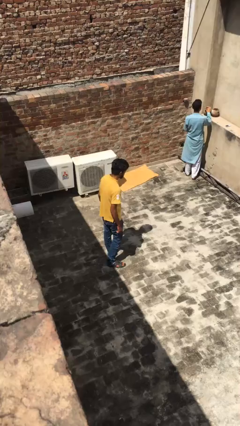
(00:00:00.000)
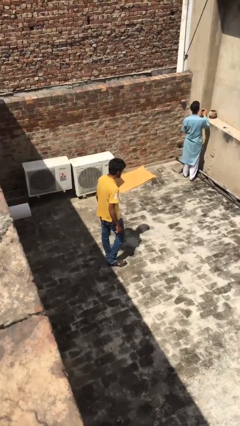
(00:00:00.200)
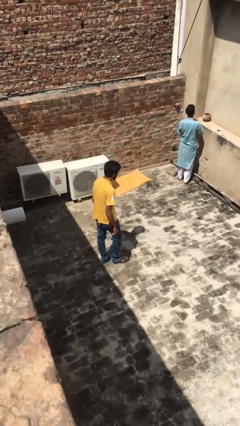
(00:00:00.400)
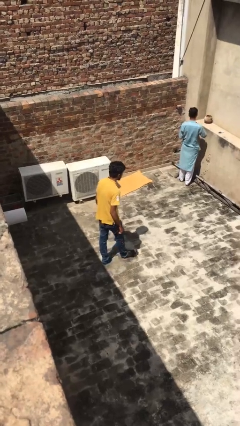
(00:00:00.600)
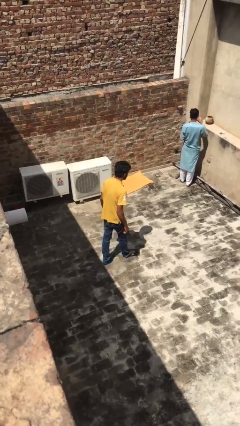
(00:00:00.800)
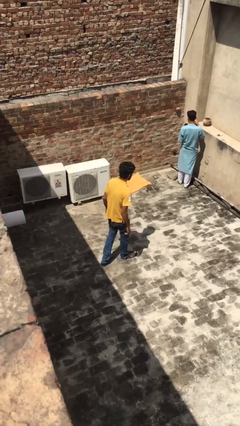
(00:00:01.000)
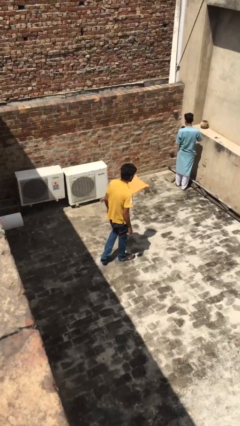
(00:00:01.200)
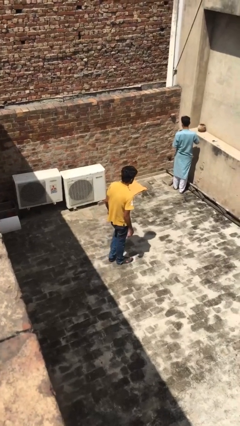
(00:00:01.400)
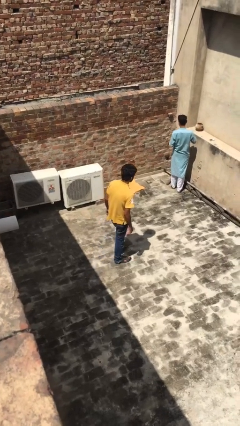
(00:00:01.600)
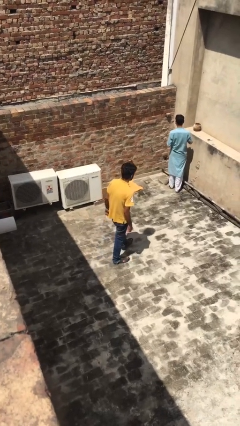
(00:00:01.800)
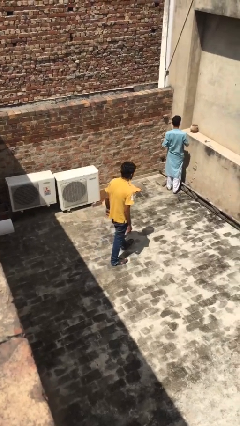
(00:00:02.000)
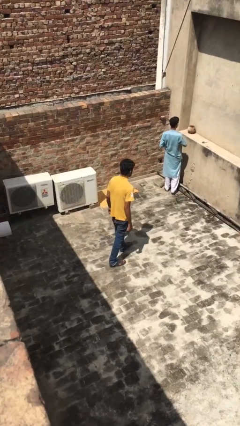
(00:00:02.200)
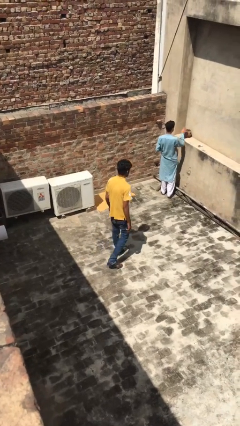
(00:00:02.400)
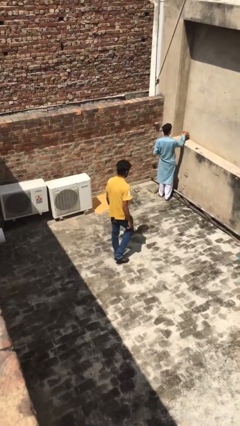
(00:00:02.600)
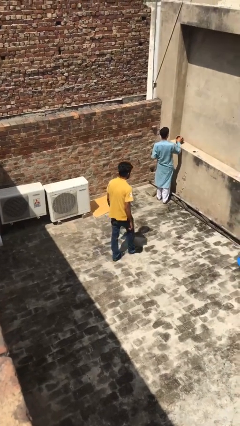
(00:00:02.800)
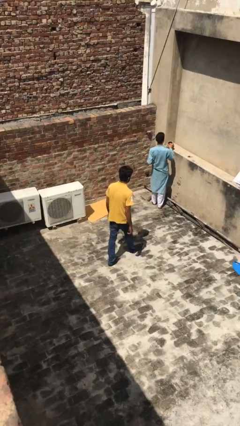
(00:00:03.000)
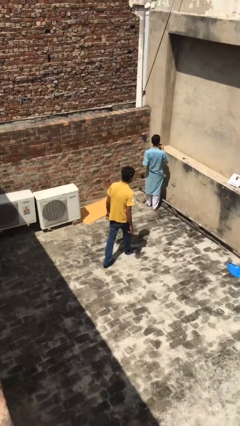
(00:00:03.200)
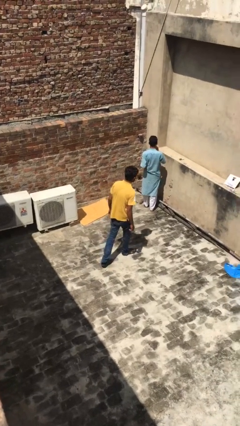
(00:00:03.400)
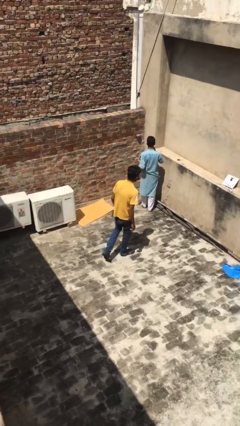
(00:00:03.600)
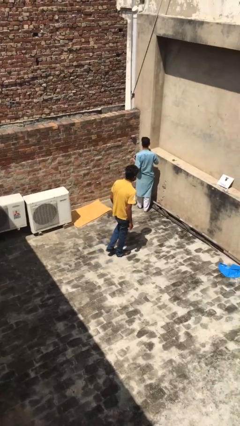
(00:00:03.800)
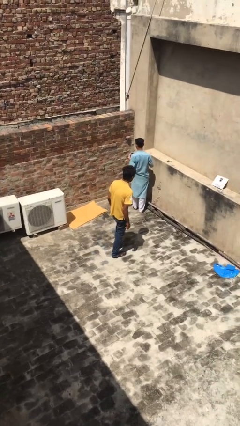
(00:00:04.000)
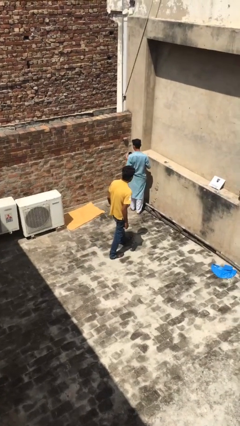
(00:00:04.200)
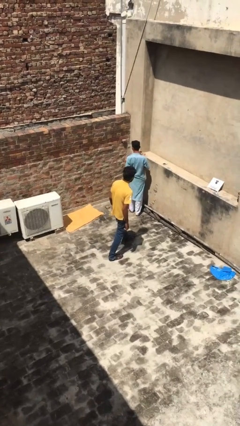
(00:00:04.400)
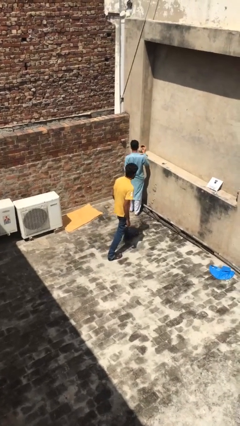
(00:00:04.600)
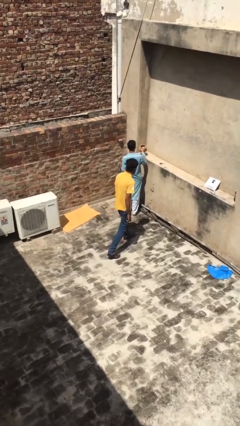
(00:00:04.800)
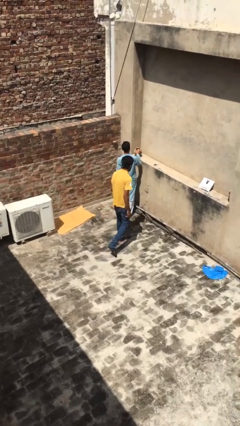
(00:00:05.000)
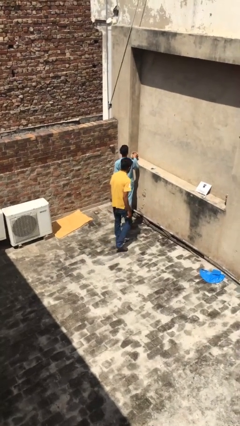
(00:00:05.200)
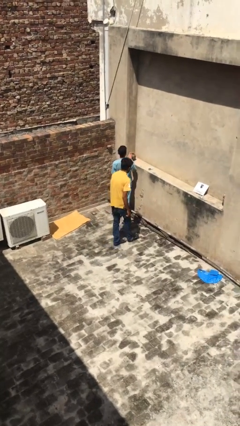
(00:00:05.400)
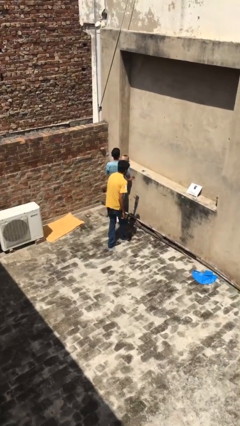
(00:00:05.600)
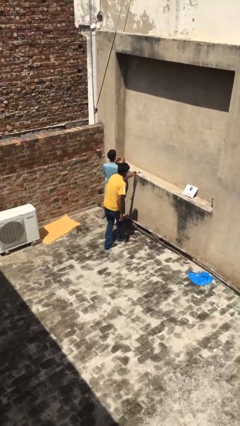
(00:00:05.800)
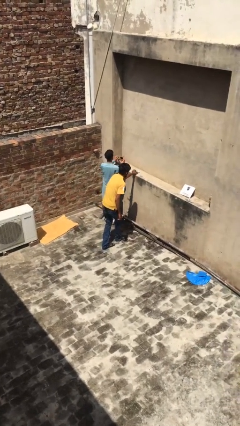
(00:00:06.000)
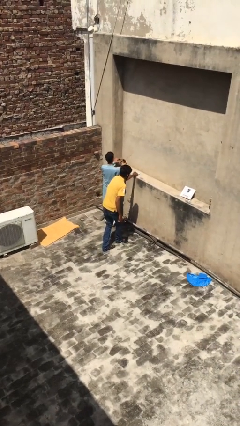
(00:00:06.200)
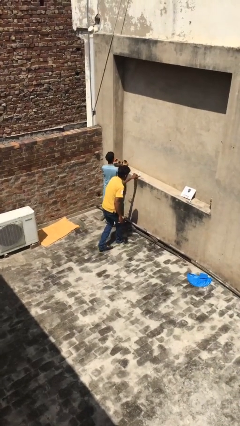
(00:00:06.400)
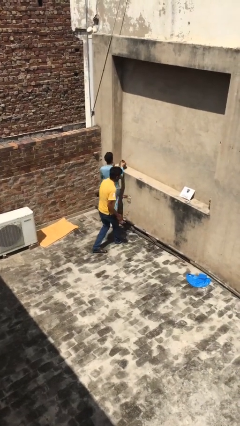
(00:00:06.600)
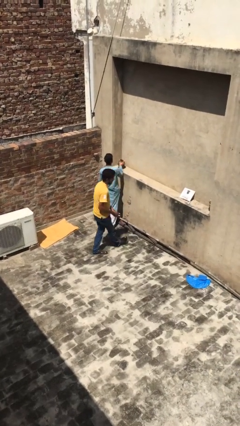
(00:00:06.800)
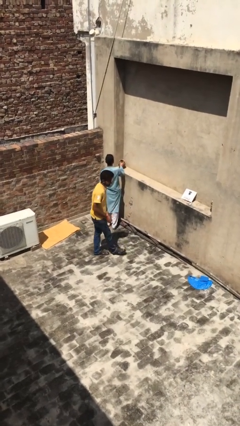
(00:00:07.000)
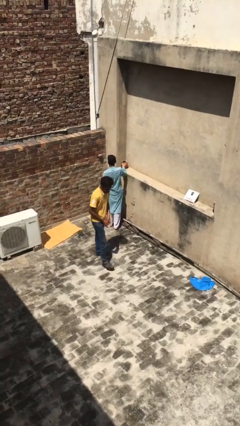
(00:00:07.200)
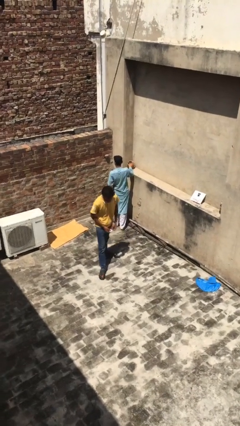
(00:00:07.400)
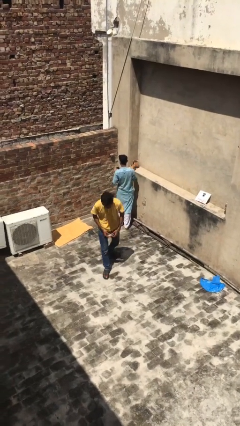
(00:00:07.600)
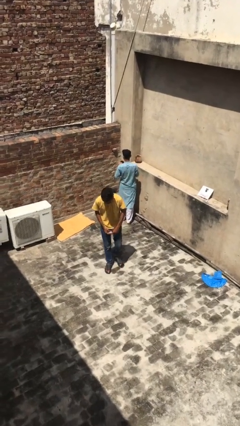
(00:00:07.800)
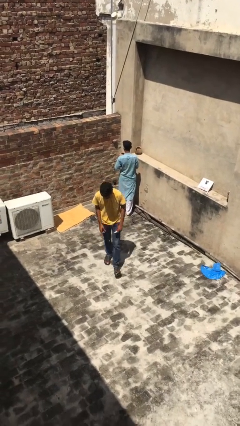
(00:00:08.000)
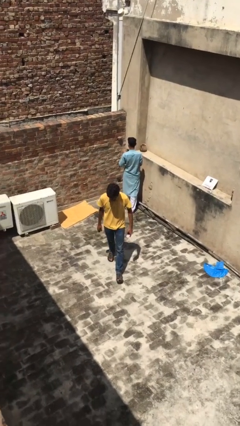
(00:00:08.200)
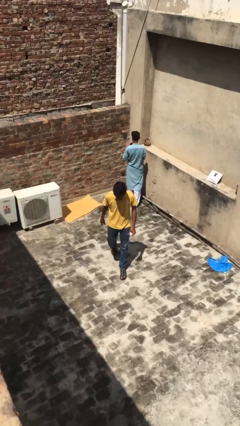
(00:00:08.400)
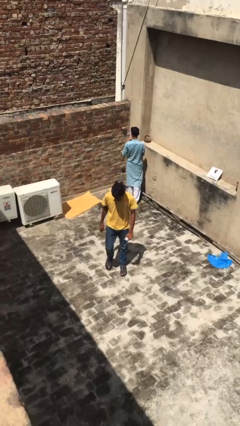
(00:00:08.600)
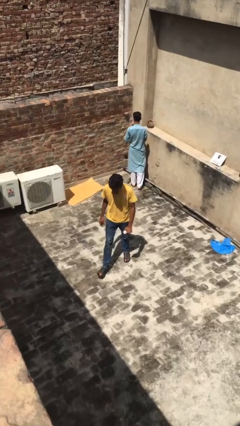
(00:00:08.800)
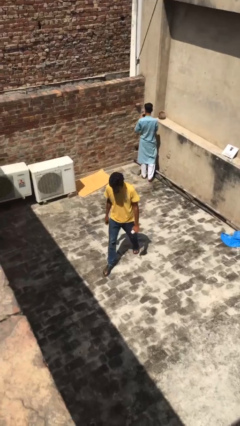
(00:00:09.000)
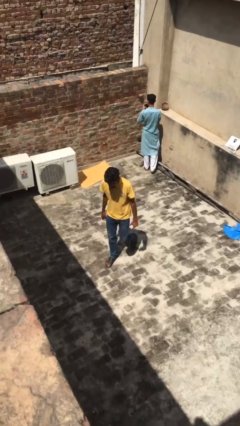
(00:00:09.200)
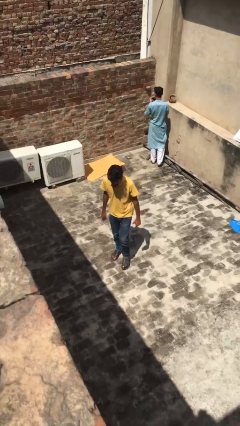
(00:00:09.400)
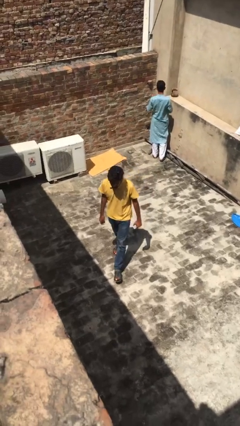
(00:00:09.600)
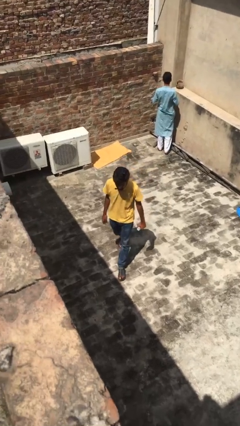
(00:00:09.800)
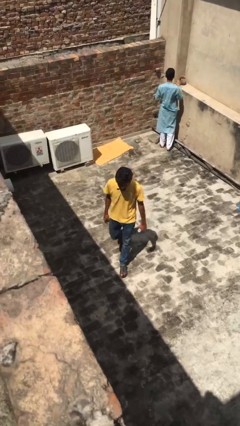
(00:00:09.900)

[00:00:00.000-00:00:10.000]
person steals object from person

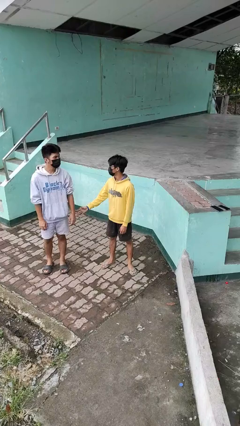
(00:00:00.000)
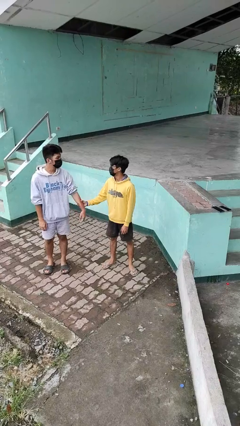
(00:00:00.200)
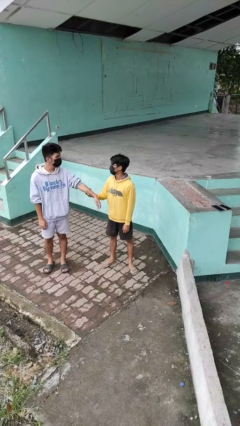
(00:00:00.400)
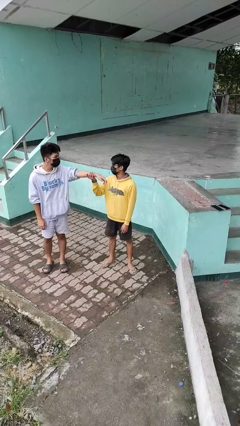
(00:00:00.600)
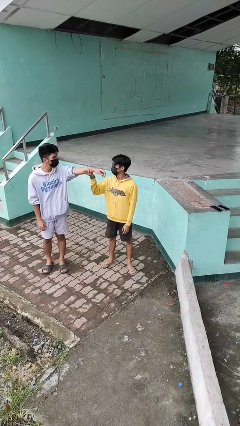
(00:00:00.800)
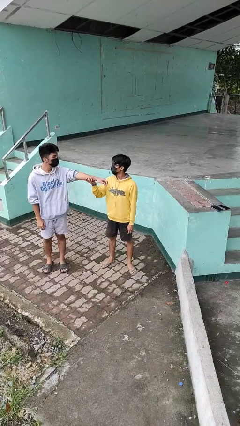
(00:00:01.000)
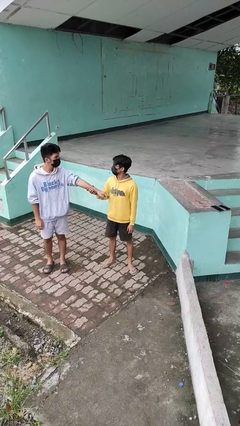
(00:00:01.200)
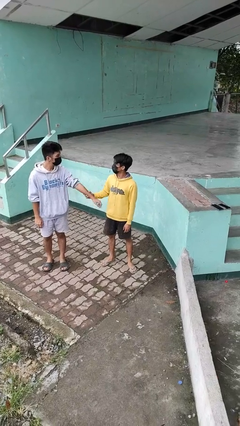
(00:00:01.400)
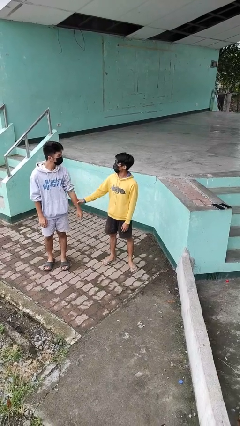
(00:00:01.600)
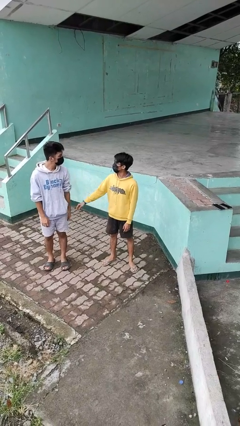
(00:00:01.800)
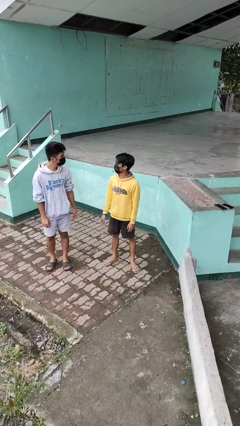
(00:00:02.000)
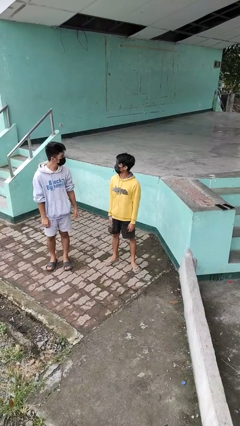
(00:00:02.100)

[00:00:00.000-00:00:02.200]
person grabs person by forearm

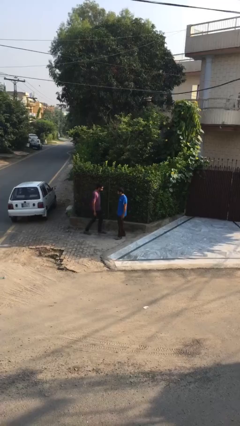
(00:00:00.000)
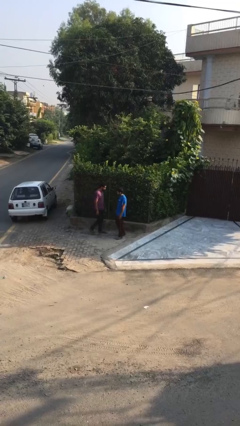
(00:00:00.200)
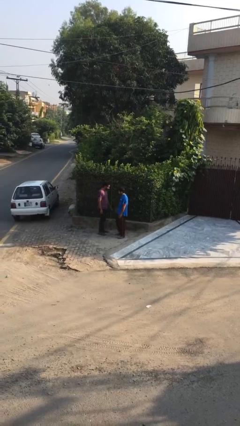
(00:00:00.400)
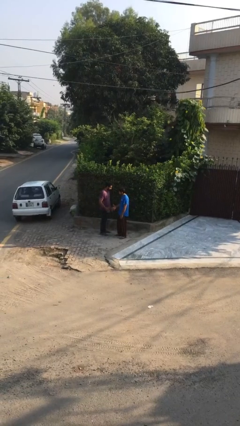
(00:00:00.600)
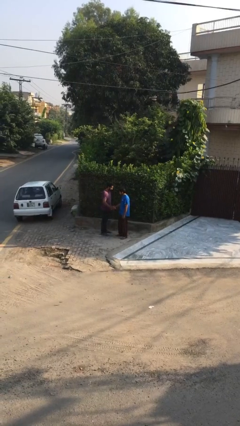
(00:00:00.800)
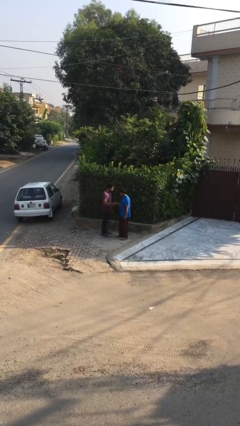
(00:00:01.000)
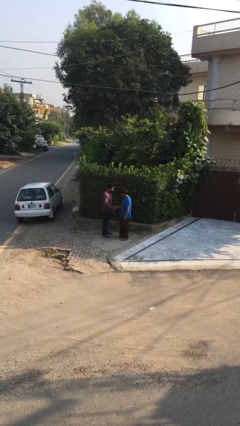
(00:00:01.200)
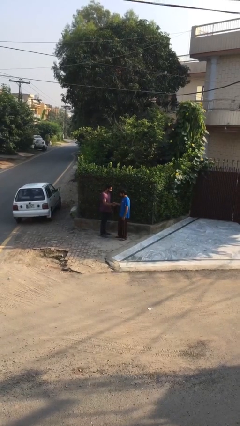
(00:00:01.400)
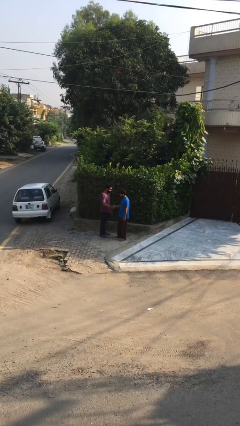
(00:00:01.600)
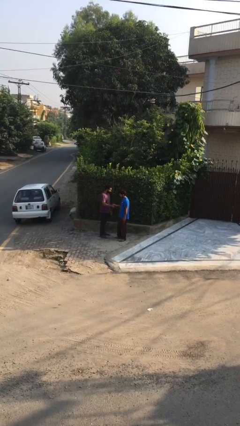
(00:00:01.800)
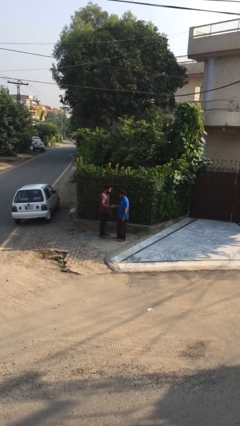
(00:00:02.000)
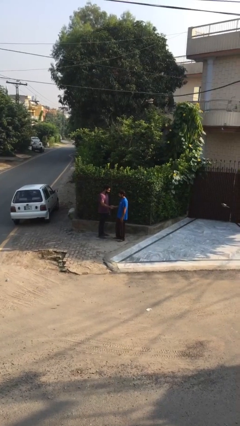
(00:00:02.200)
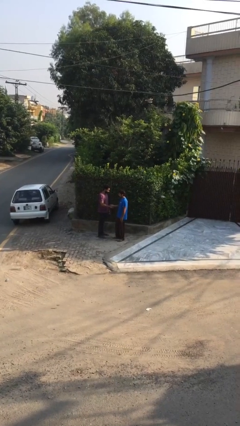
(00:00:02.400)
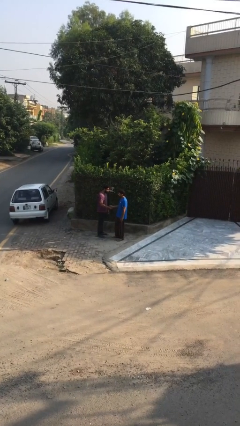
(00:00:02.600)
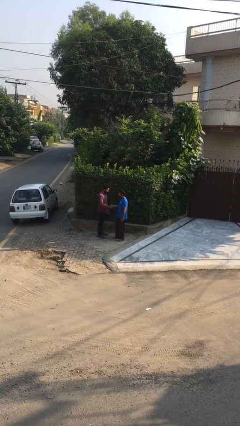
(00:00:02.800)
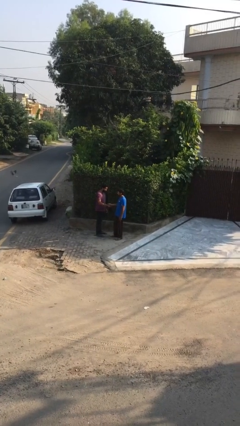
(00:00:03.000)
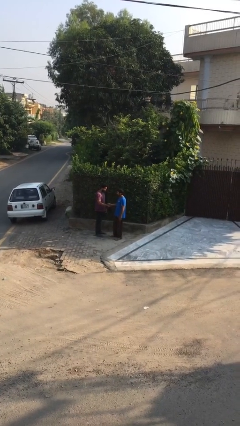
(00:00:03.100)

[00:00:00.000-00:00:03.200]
person shakes hand

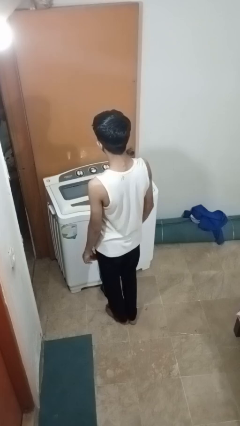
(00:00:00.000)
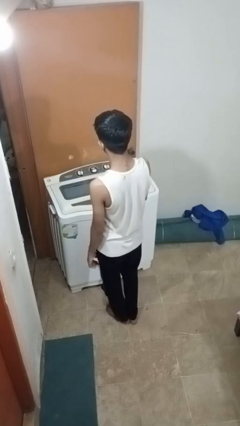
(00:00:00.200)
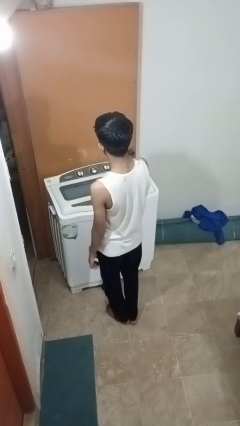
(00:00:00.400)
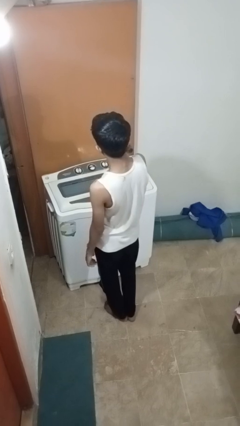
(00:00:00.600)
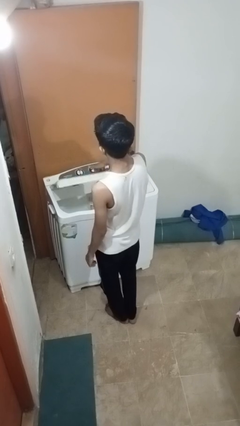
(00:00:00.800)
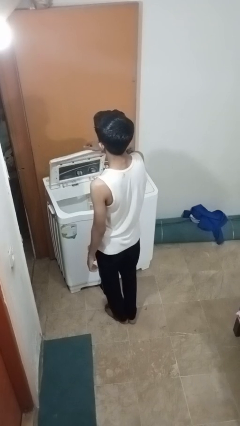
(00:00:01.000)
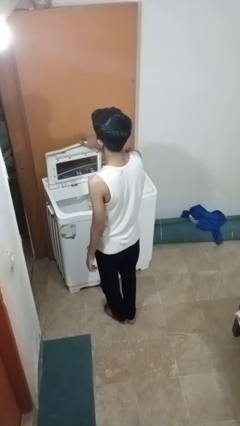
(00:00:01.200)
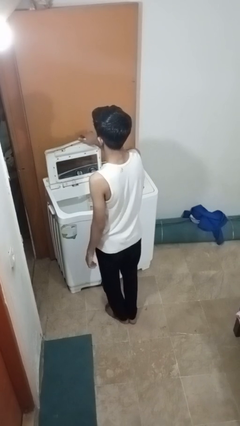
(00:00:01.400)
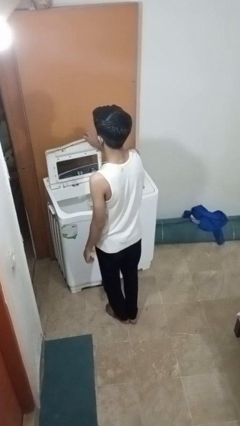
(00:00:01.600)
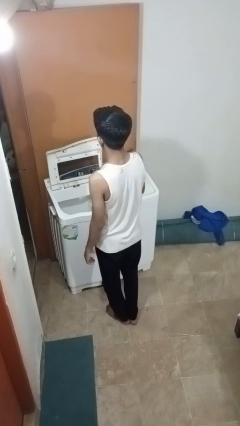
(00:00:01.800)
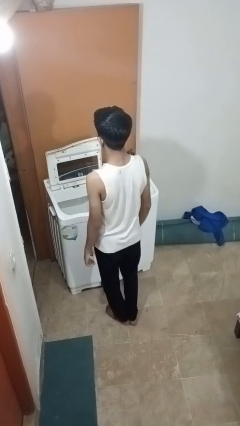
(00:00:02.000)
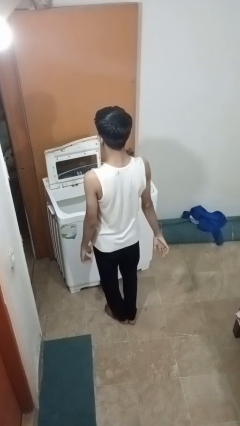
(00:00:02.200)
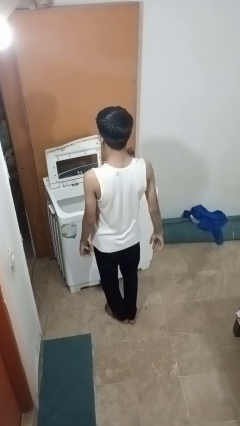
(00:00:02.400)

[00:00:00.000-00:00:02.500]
person opens clothes washer
